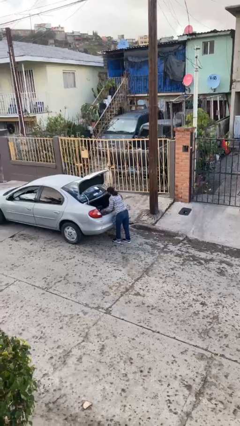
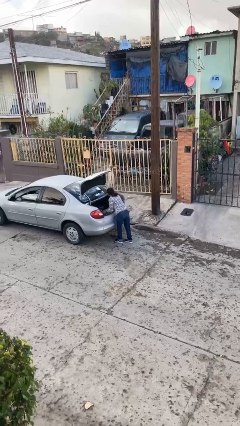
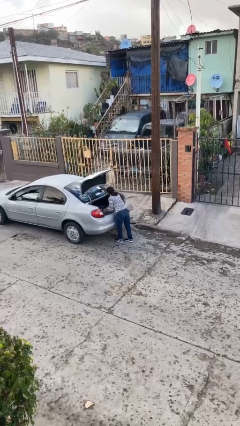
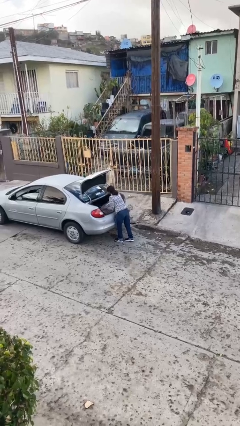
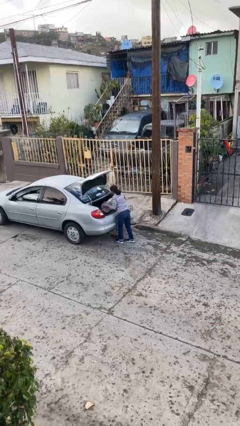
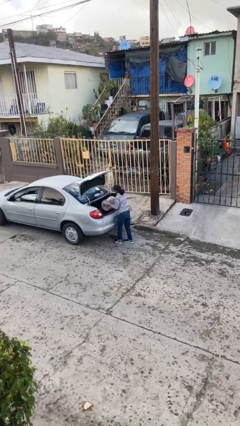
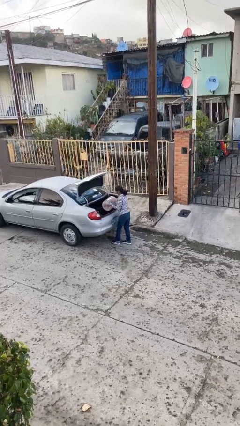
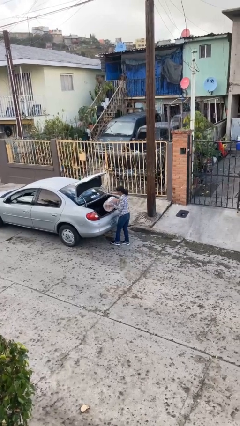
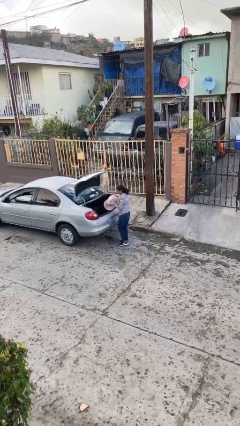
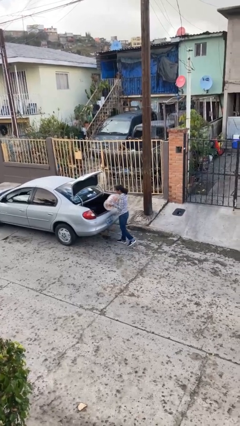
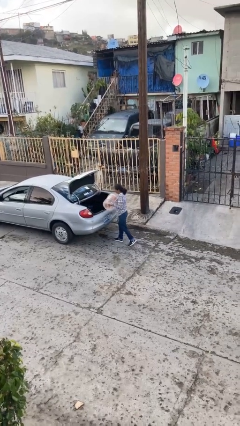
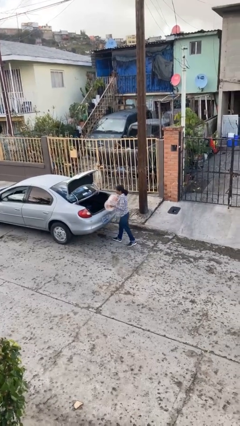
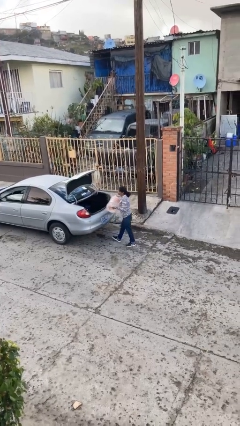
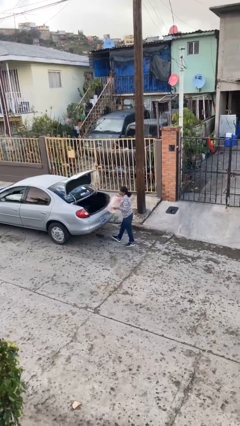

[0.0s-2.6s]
person unloads car

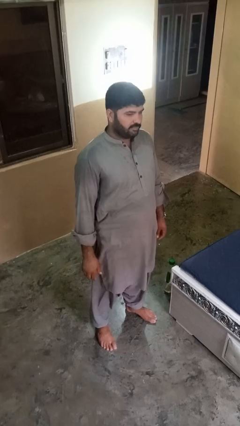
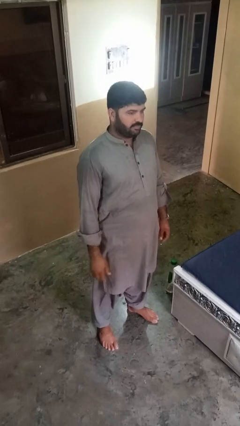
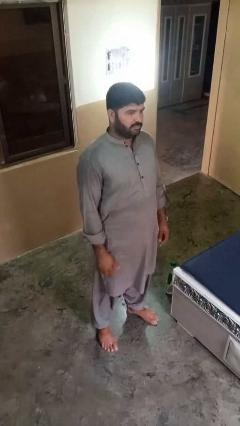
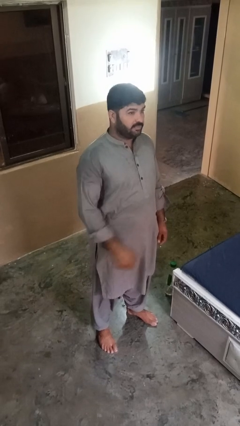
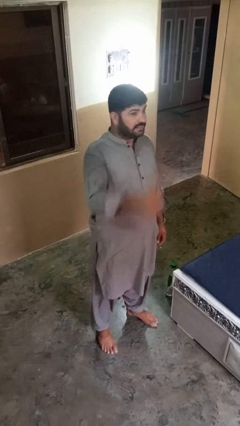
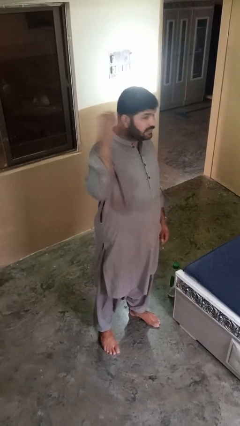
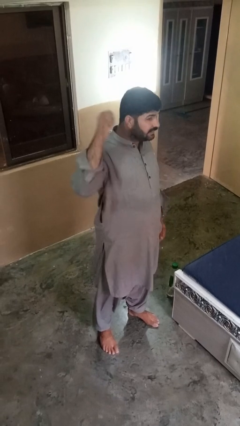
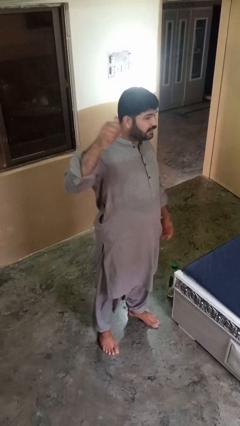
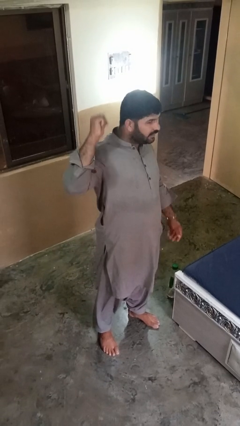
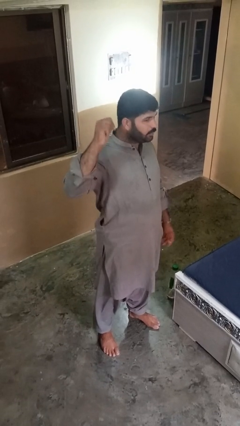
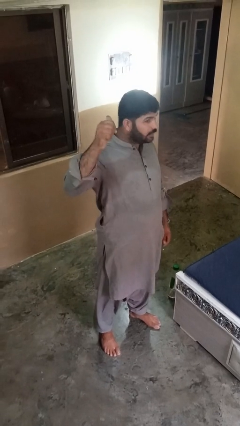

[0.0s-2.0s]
person gestures behind me

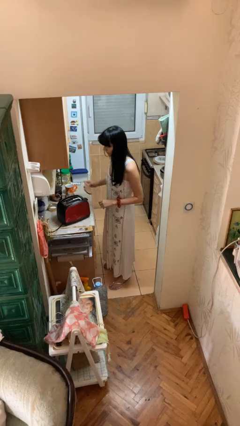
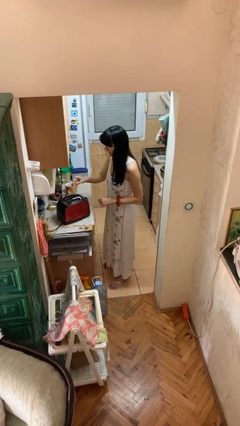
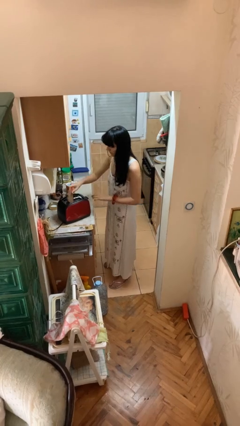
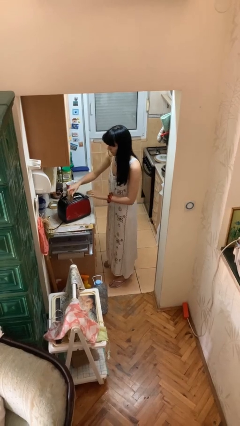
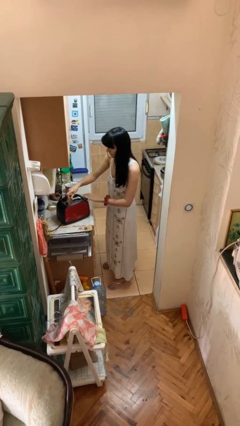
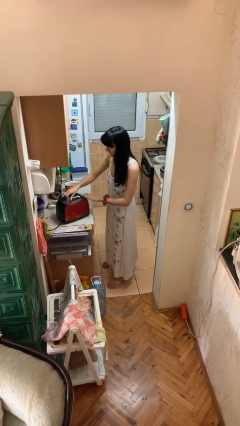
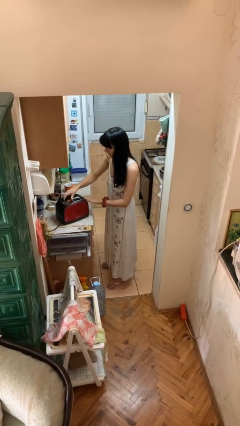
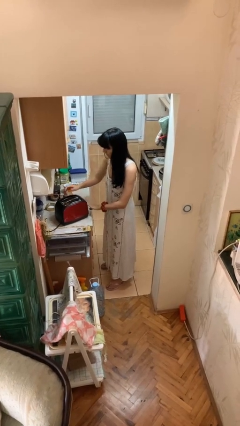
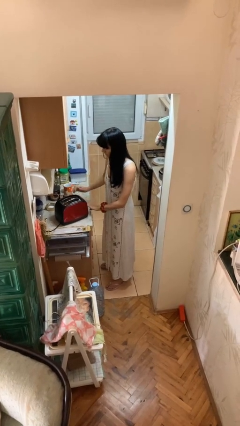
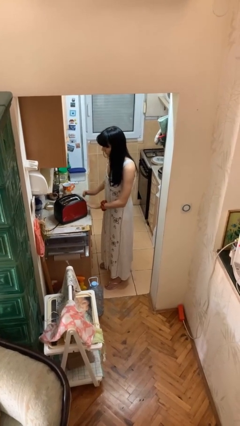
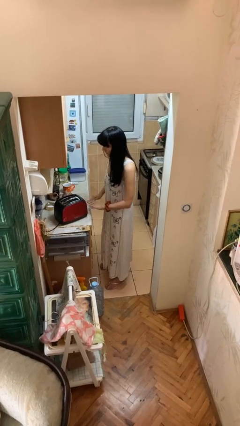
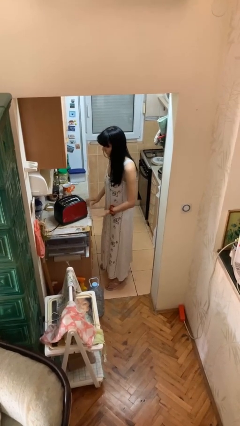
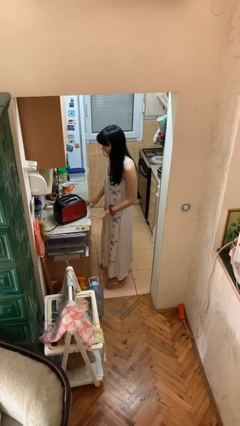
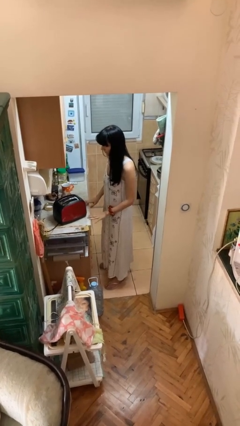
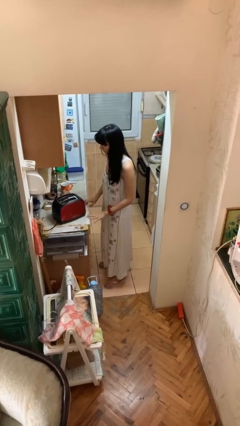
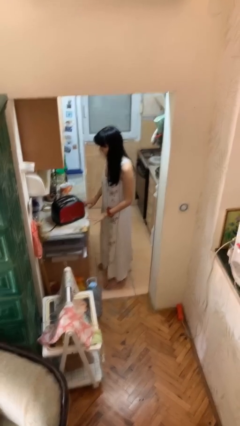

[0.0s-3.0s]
person puts object into toaster

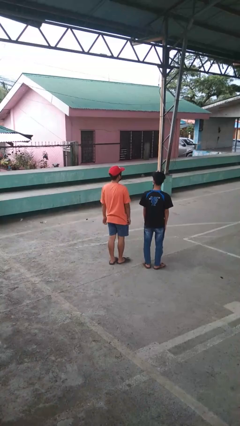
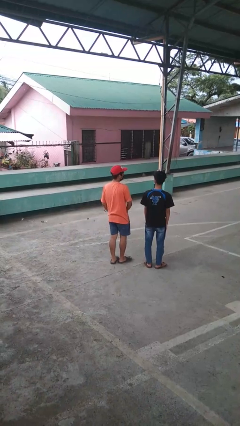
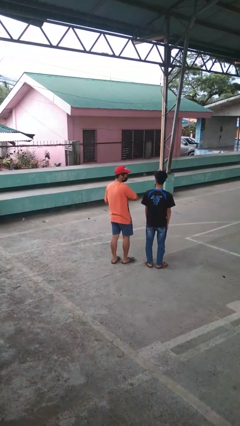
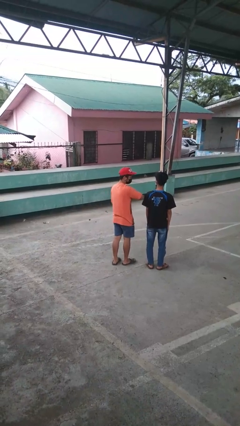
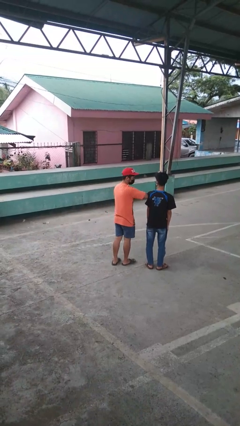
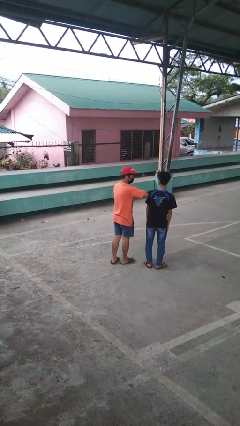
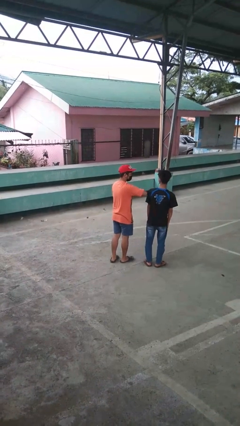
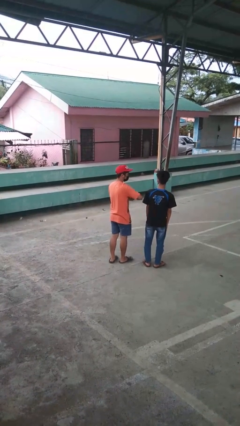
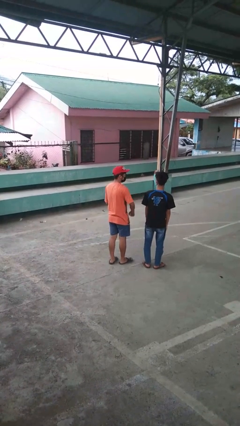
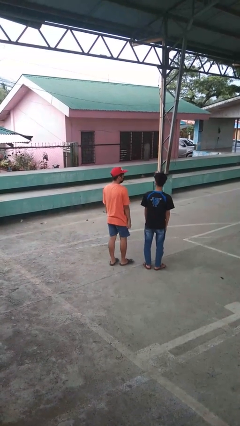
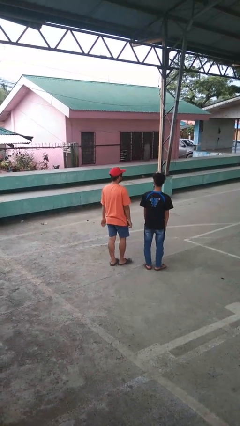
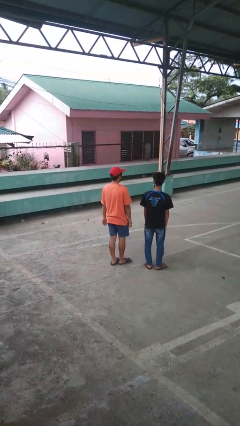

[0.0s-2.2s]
person nudges person with elbow

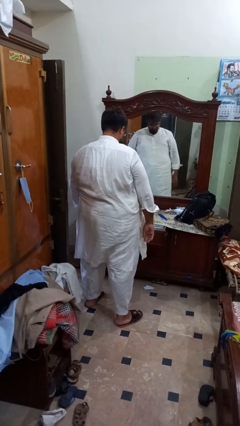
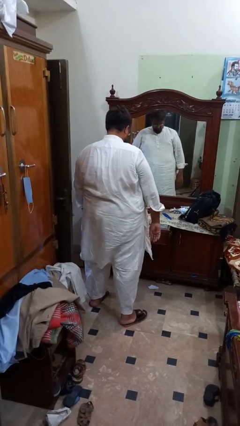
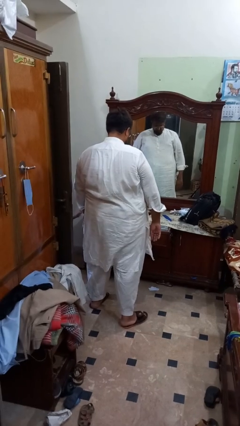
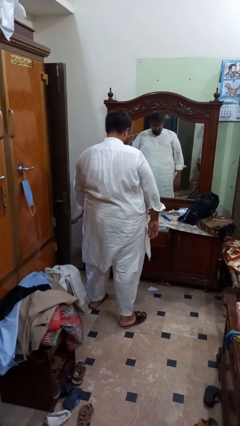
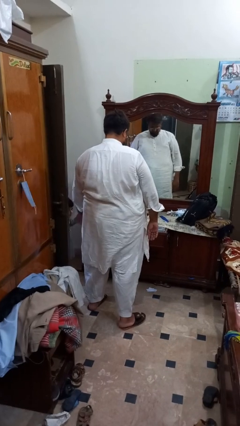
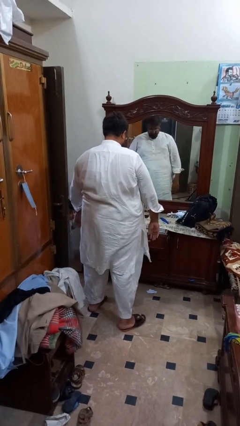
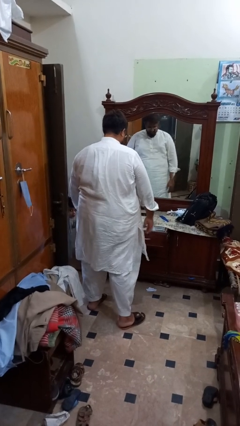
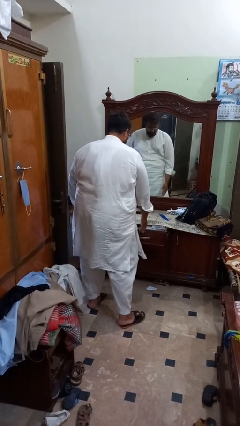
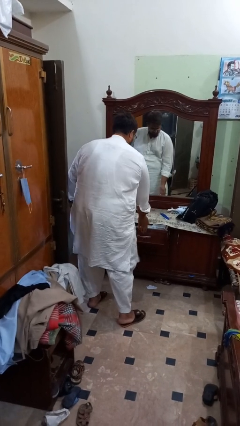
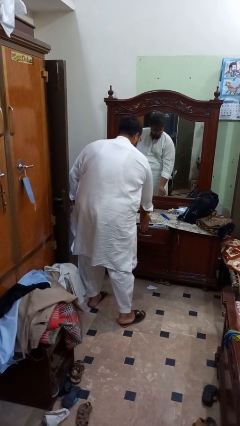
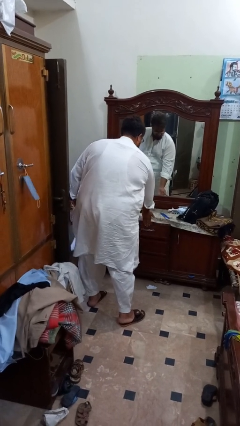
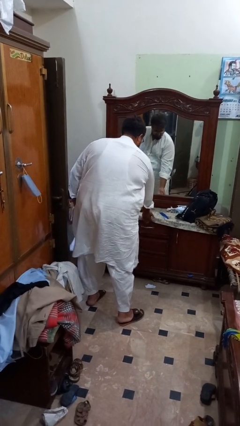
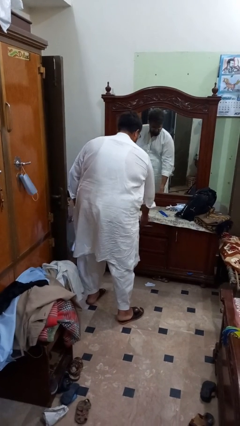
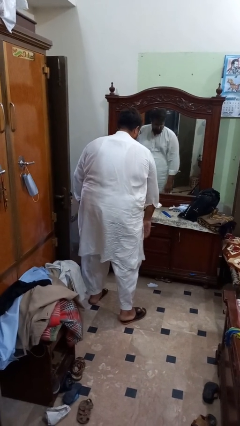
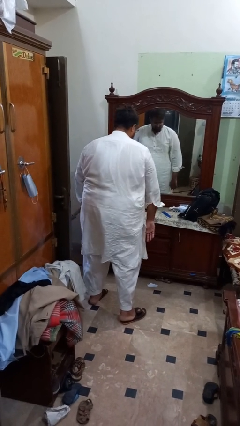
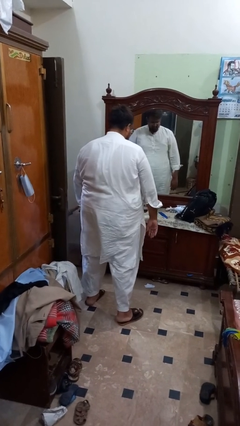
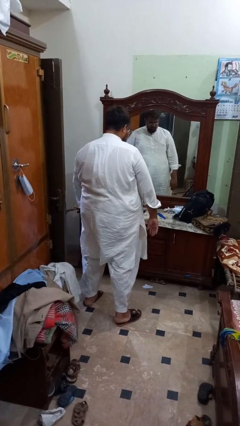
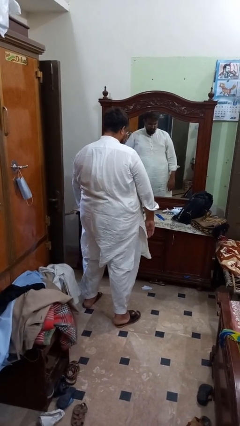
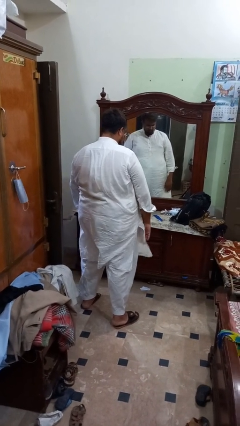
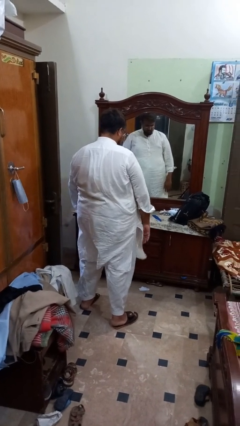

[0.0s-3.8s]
person closes dresser drawer

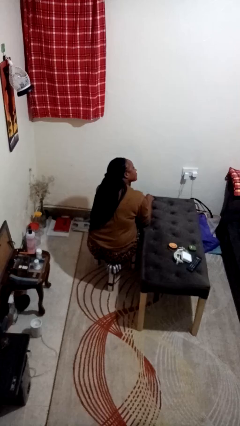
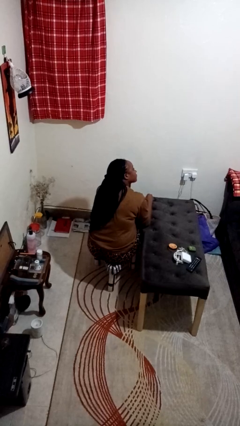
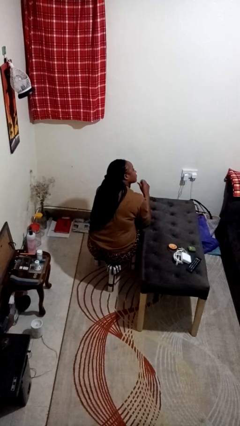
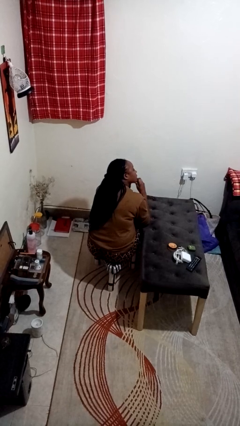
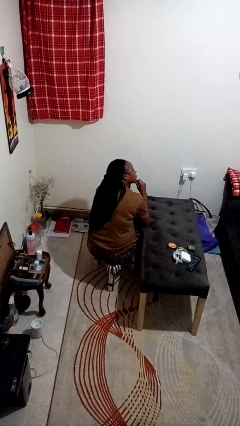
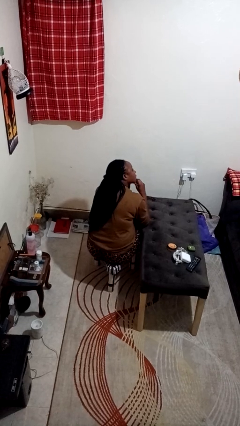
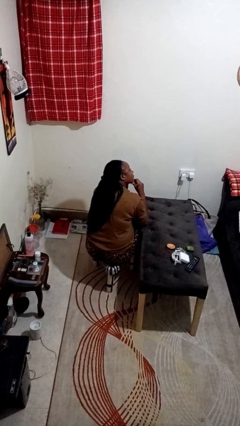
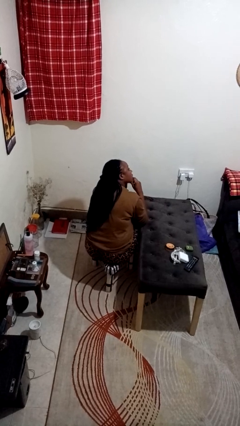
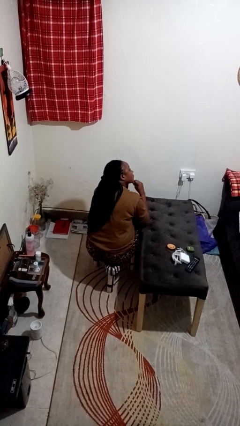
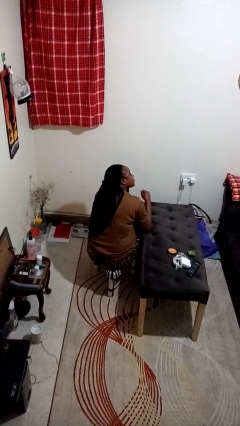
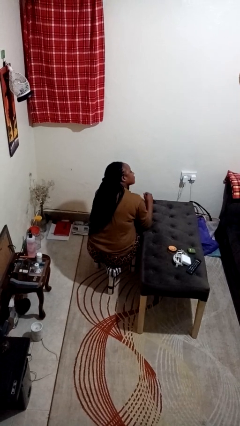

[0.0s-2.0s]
person strokes chin

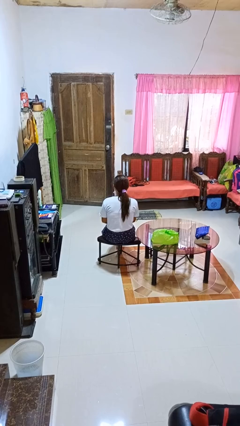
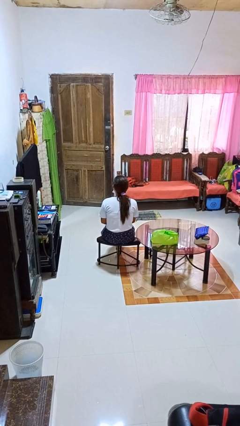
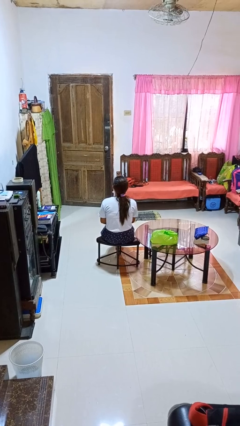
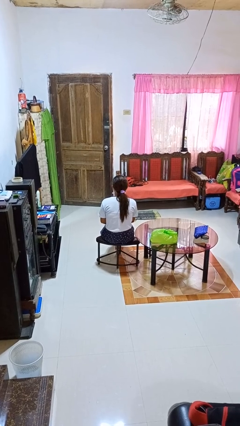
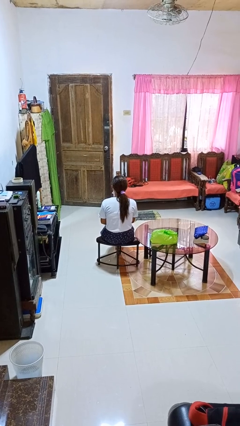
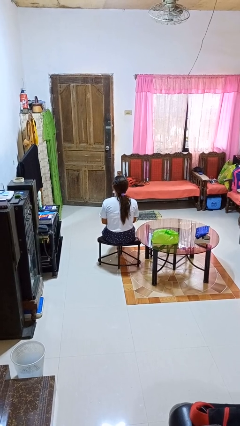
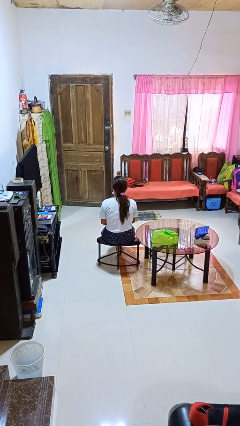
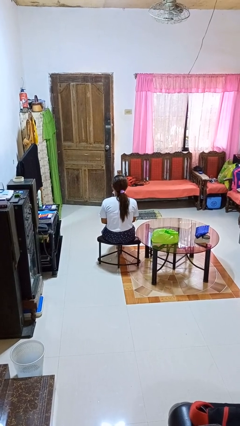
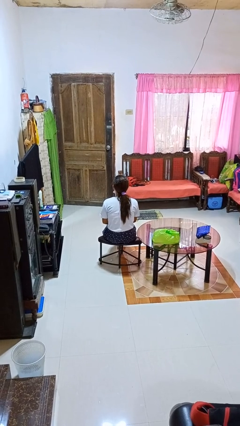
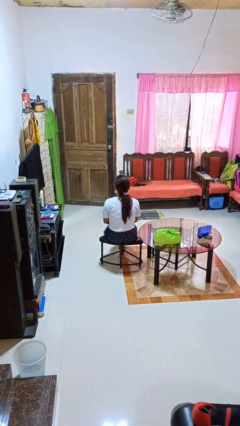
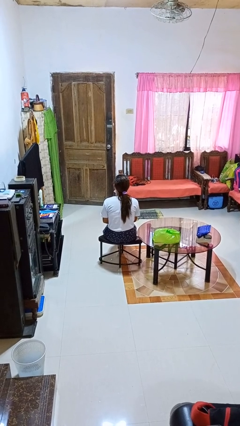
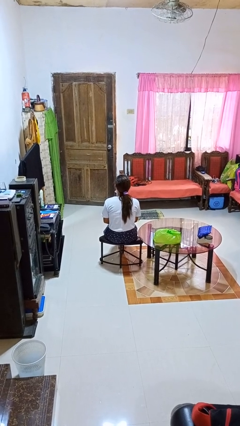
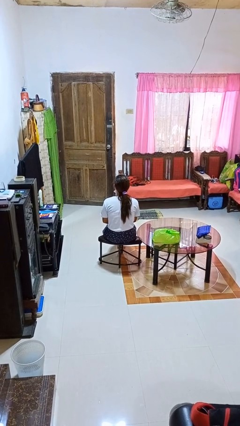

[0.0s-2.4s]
person nods head
